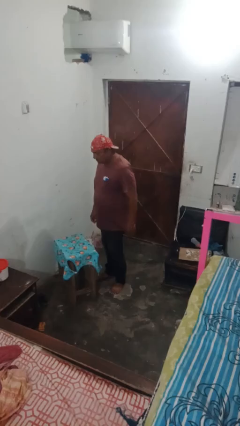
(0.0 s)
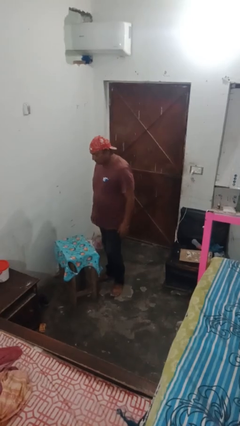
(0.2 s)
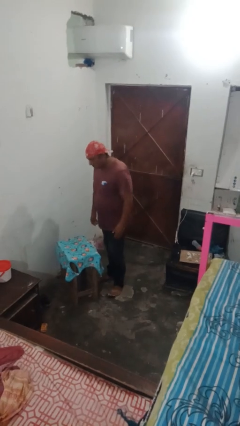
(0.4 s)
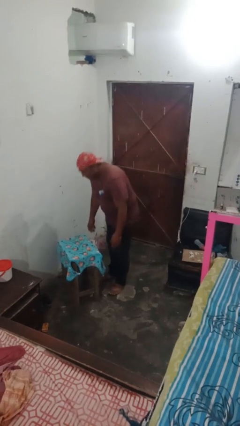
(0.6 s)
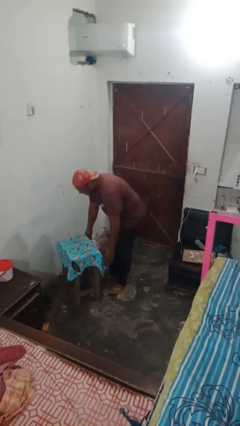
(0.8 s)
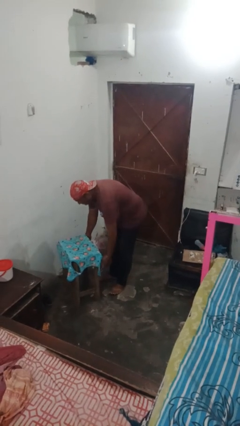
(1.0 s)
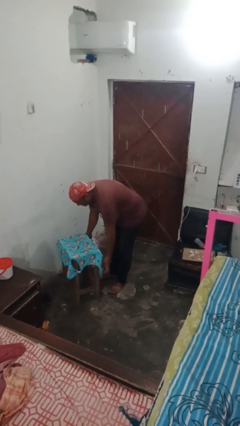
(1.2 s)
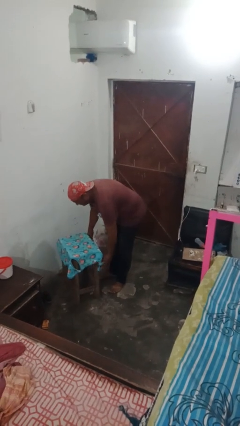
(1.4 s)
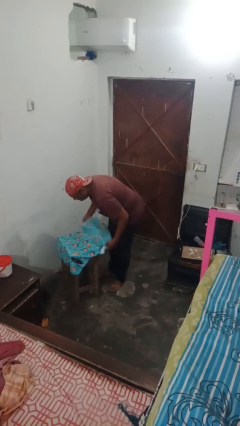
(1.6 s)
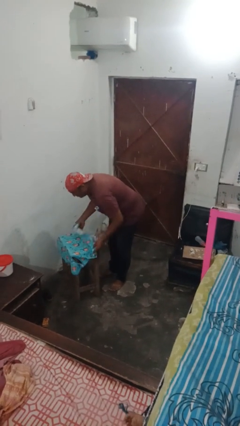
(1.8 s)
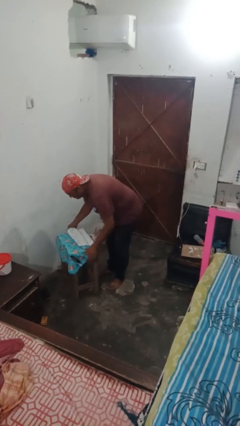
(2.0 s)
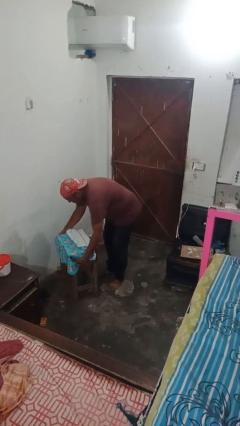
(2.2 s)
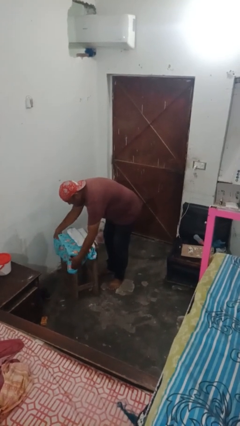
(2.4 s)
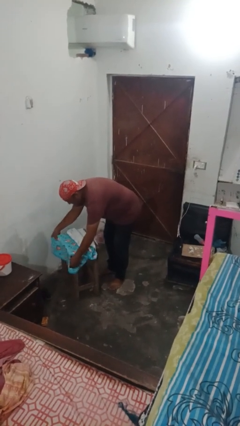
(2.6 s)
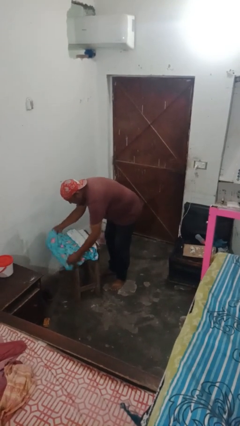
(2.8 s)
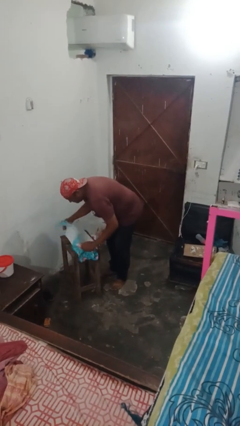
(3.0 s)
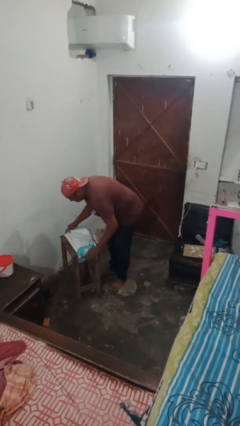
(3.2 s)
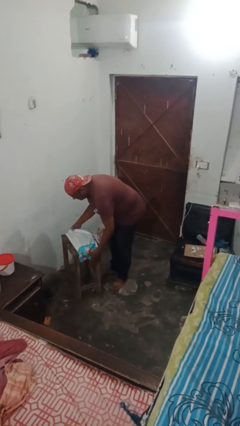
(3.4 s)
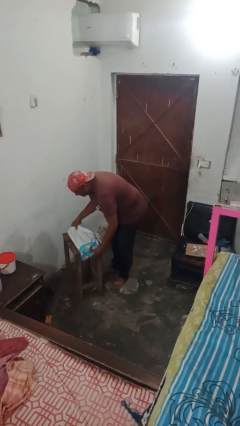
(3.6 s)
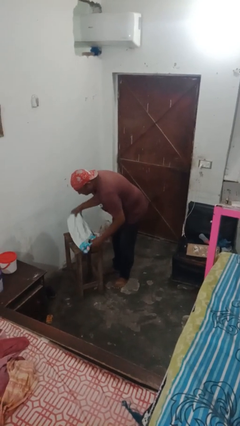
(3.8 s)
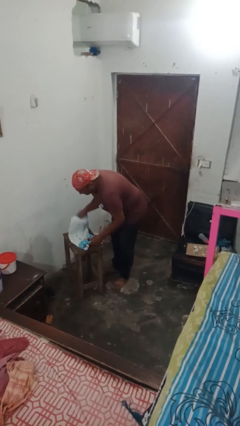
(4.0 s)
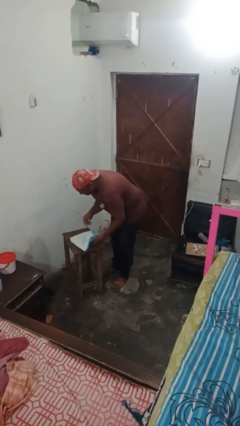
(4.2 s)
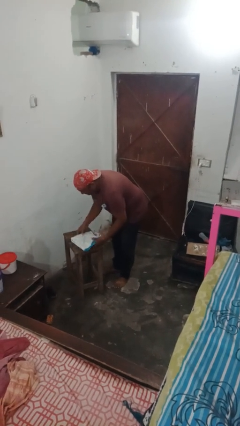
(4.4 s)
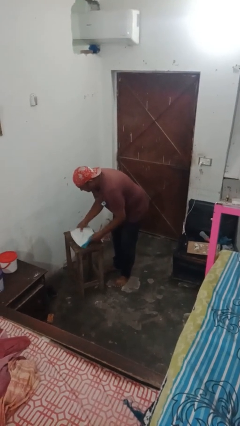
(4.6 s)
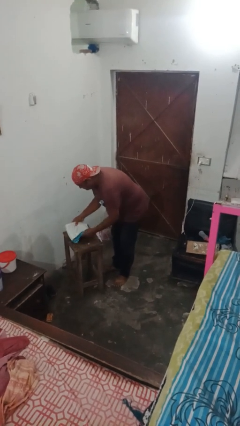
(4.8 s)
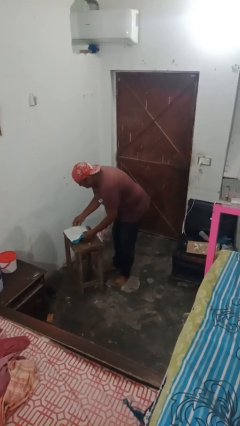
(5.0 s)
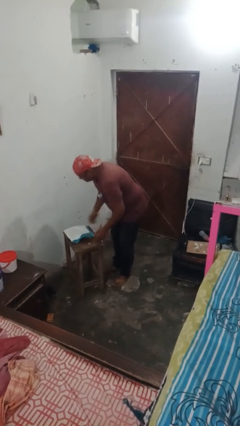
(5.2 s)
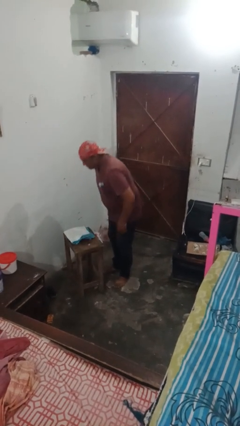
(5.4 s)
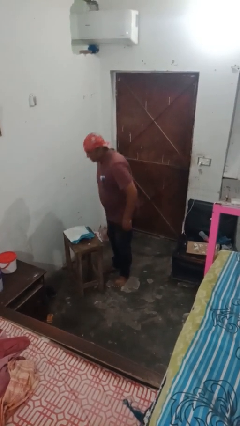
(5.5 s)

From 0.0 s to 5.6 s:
person spreads tablecloth

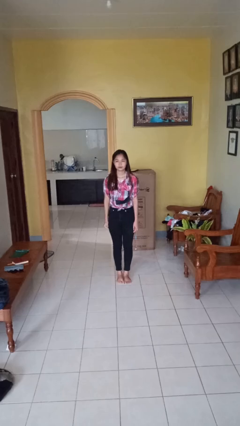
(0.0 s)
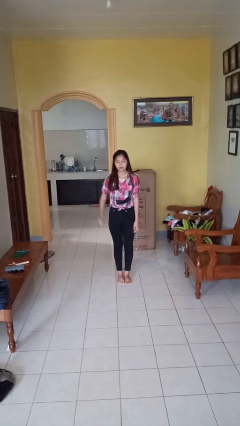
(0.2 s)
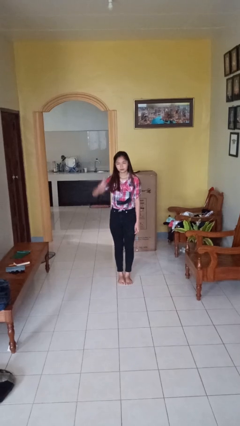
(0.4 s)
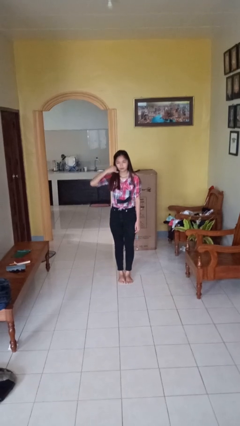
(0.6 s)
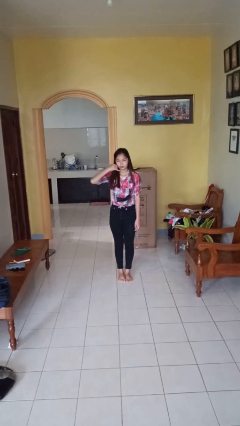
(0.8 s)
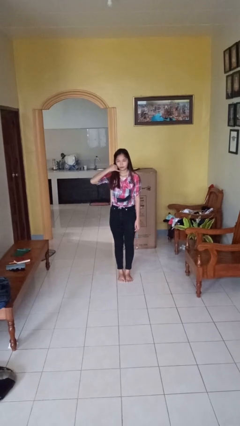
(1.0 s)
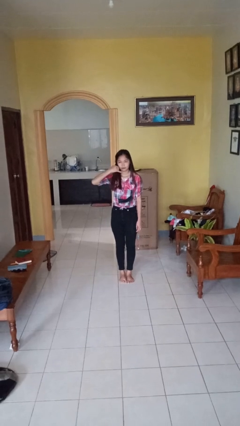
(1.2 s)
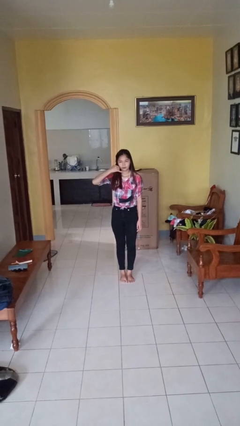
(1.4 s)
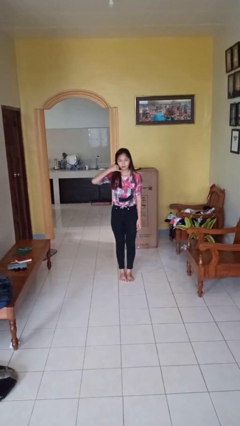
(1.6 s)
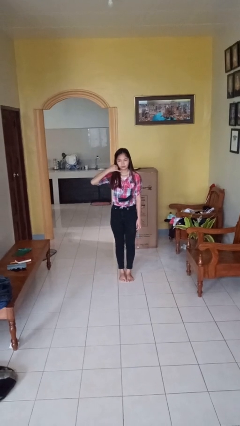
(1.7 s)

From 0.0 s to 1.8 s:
person gestures call me

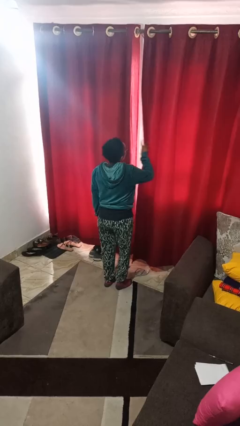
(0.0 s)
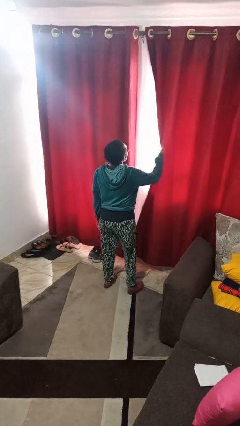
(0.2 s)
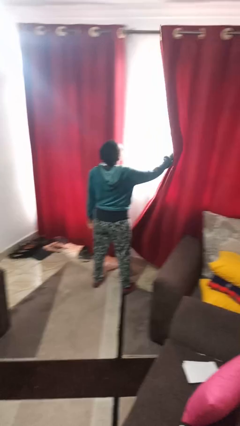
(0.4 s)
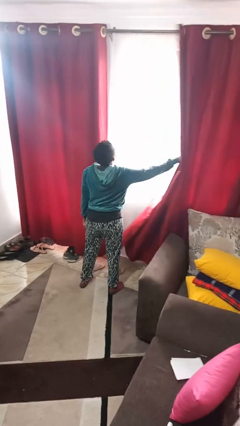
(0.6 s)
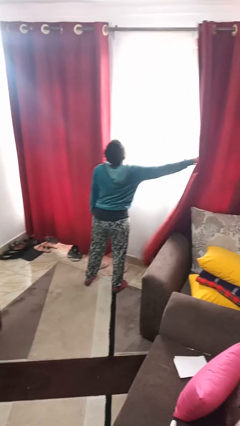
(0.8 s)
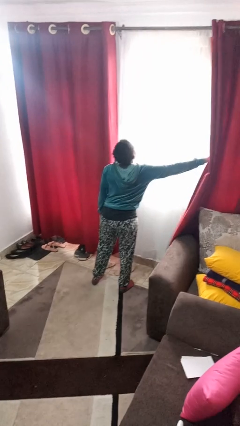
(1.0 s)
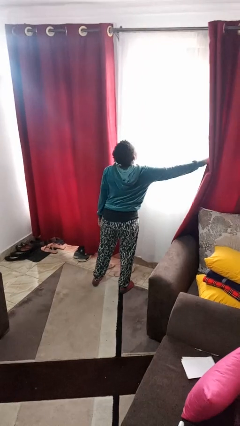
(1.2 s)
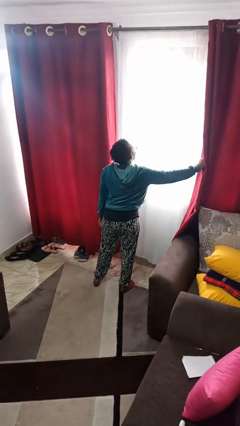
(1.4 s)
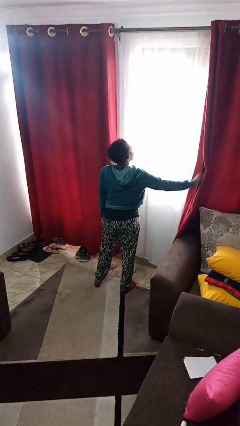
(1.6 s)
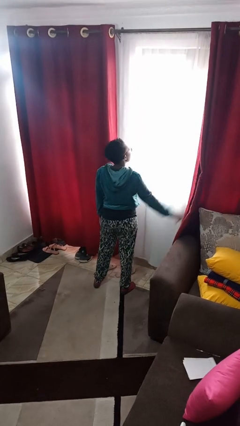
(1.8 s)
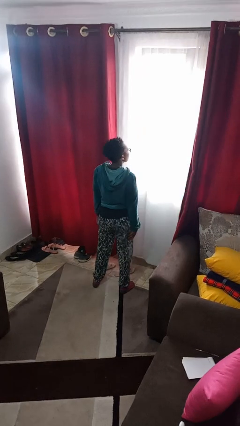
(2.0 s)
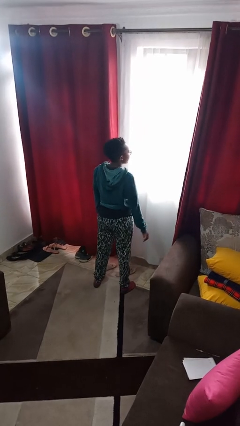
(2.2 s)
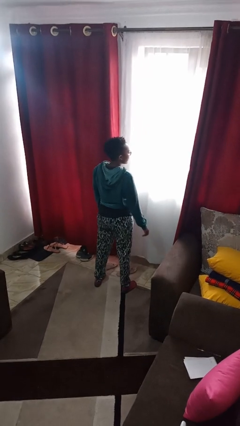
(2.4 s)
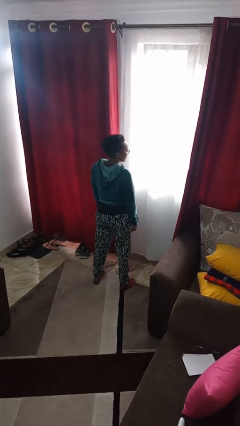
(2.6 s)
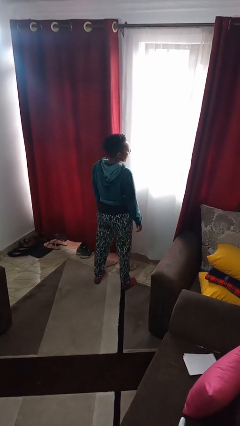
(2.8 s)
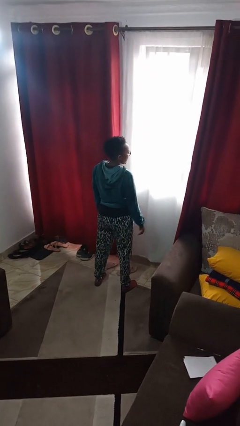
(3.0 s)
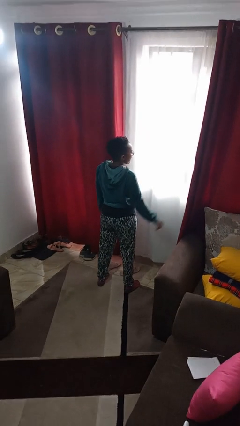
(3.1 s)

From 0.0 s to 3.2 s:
person opens curtains

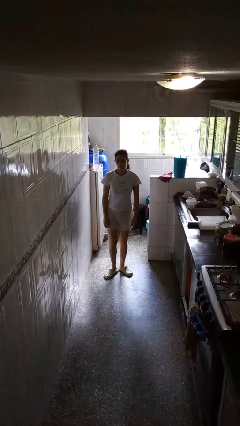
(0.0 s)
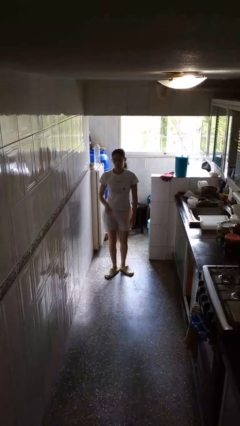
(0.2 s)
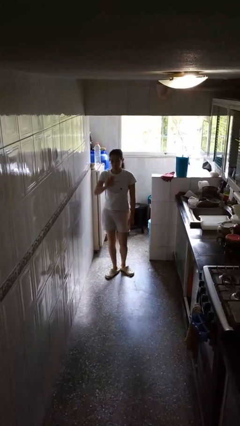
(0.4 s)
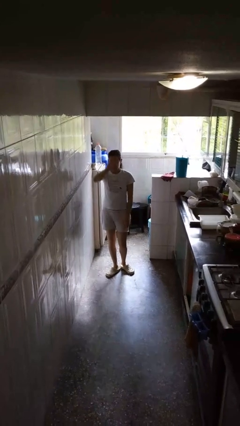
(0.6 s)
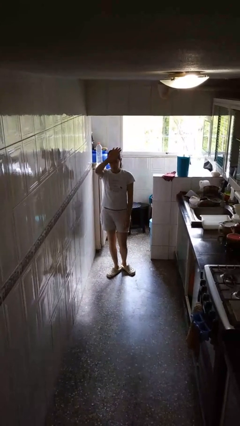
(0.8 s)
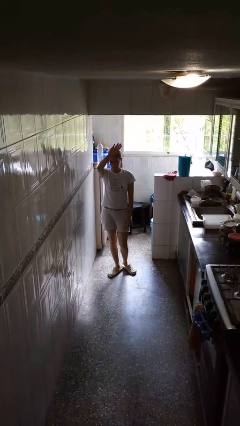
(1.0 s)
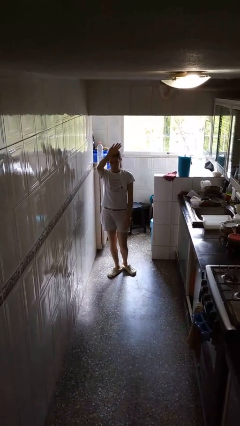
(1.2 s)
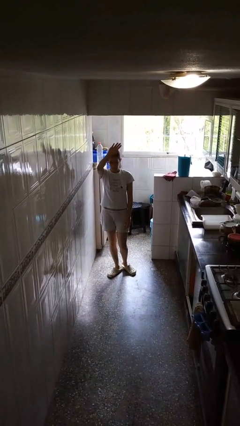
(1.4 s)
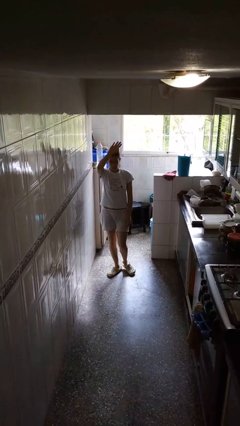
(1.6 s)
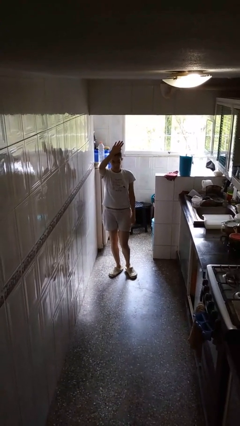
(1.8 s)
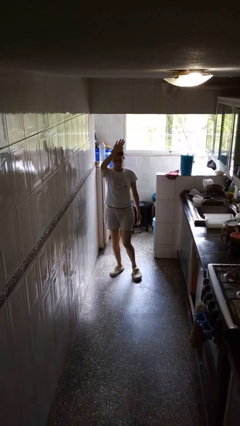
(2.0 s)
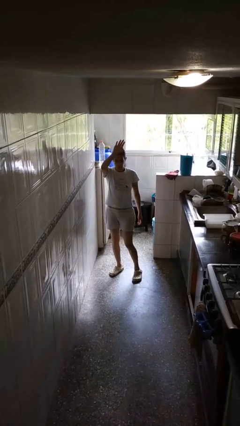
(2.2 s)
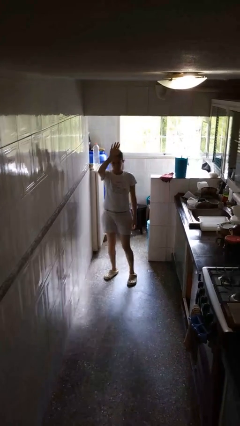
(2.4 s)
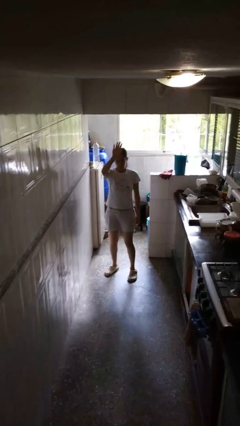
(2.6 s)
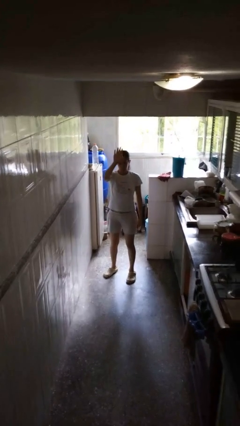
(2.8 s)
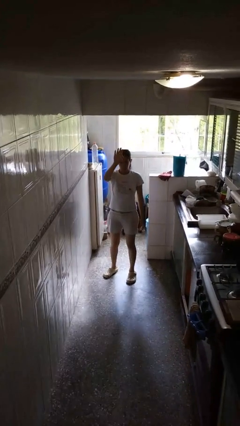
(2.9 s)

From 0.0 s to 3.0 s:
person gestures raise hand

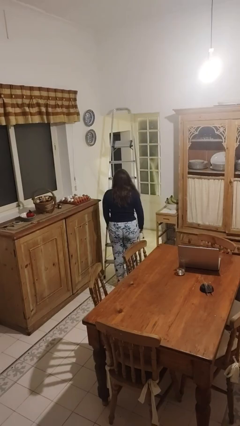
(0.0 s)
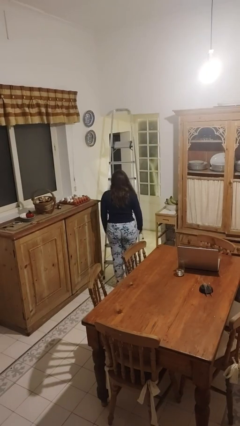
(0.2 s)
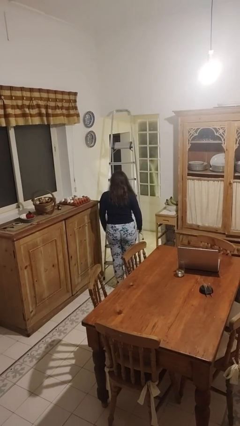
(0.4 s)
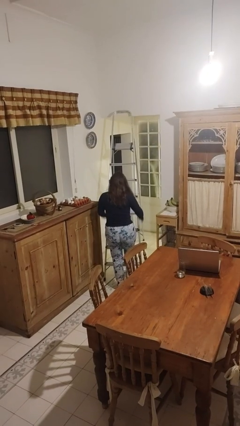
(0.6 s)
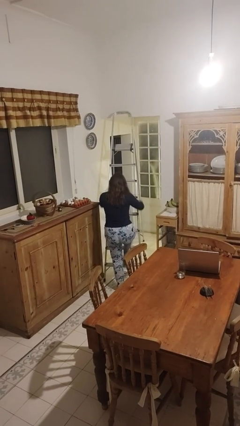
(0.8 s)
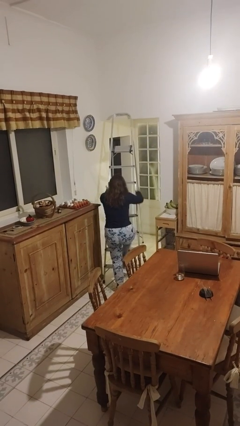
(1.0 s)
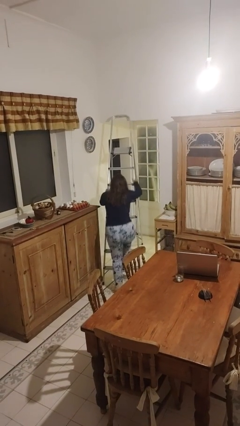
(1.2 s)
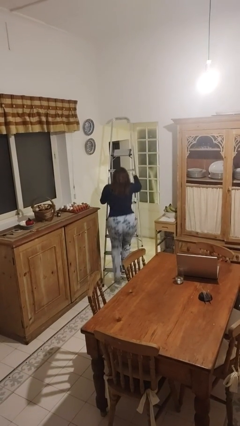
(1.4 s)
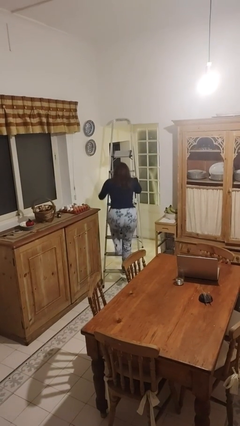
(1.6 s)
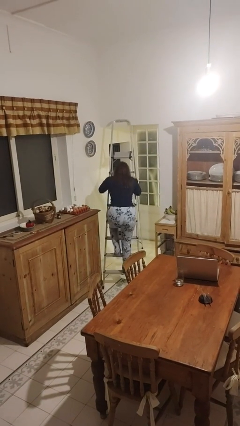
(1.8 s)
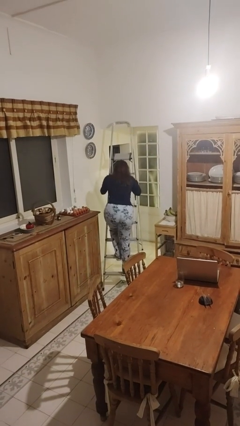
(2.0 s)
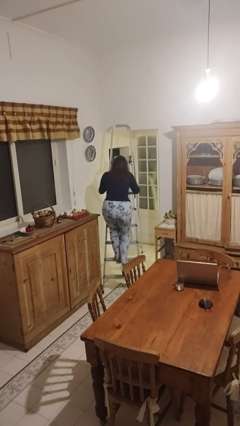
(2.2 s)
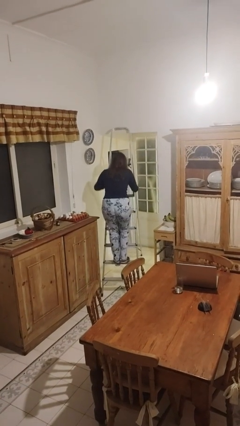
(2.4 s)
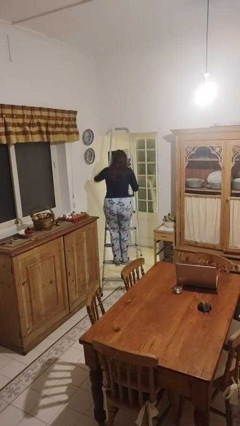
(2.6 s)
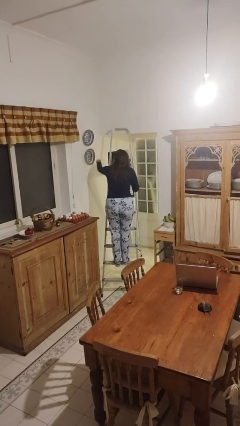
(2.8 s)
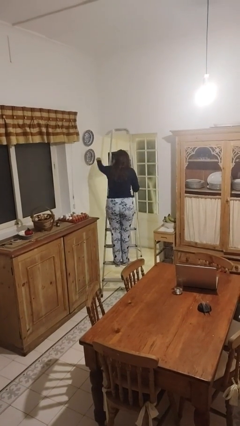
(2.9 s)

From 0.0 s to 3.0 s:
person climbs up ladder

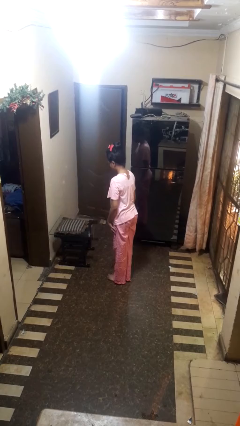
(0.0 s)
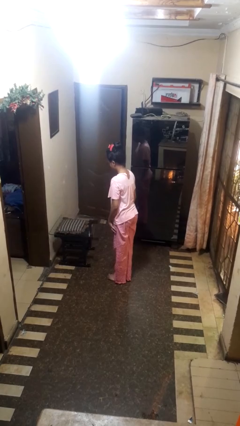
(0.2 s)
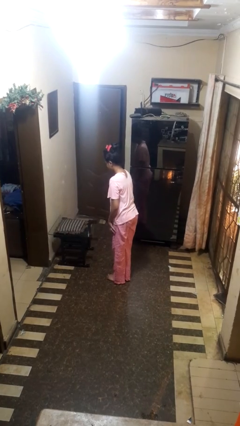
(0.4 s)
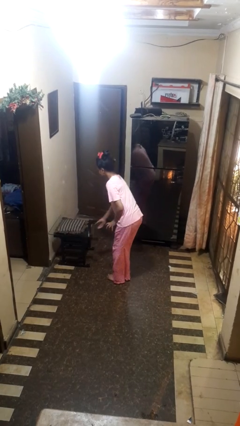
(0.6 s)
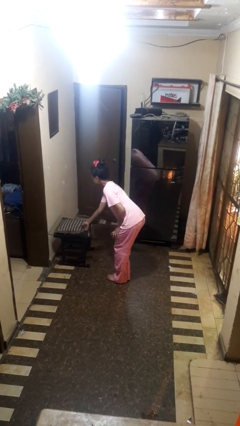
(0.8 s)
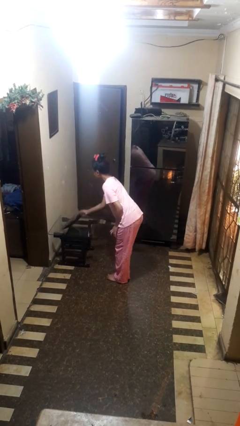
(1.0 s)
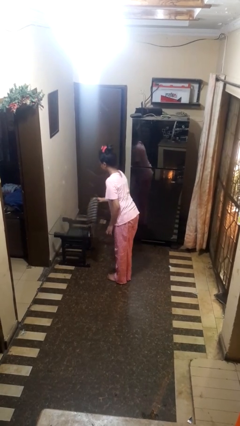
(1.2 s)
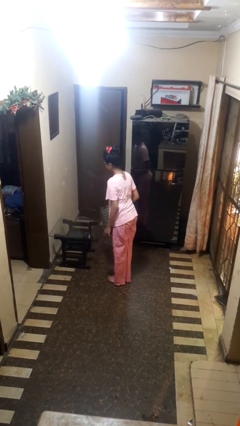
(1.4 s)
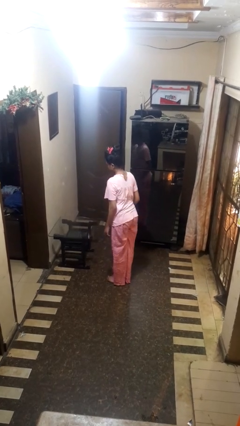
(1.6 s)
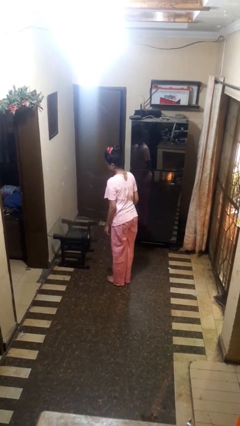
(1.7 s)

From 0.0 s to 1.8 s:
person picks up object from table
